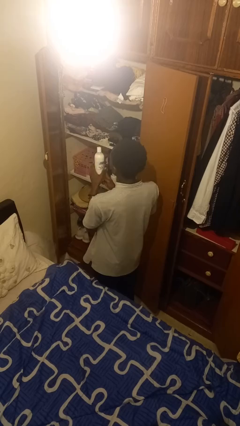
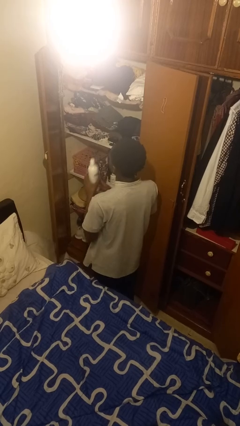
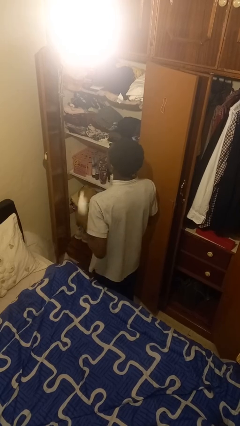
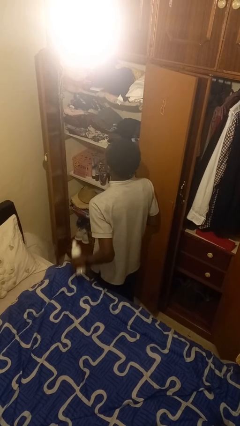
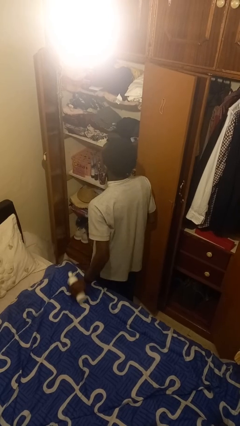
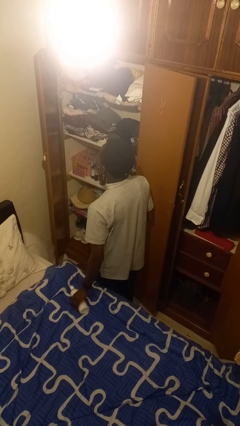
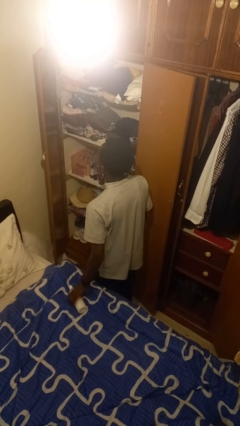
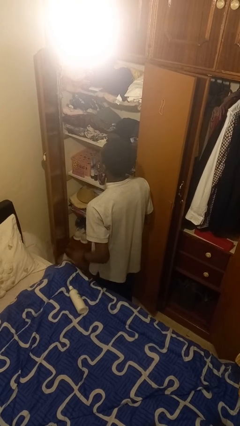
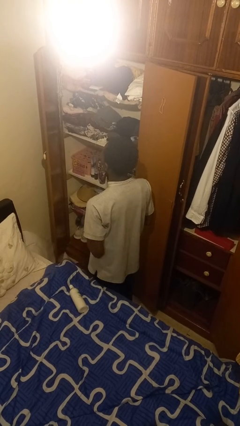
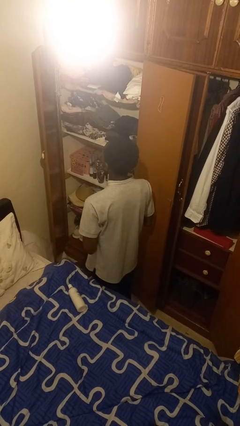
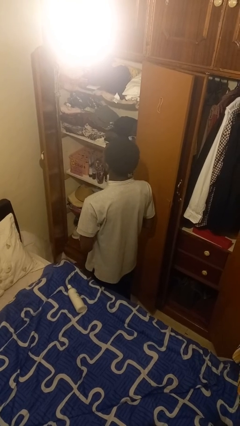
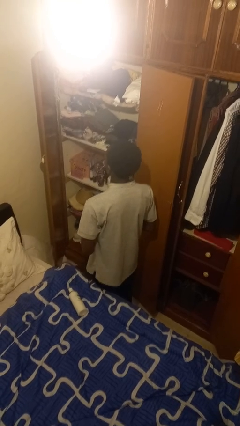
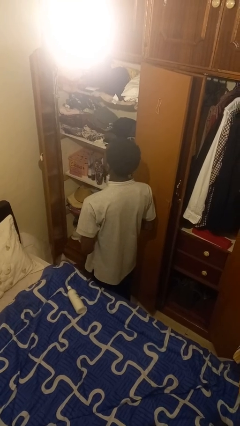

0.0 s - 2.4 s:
person puts down object on bed

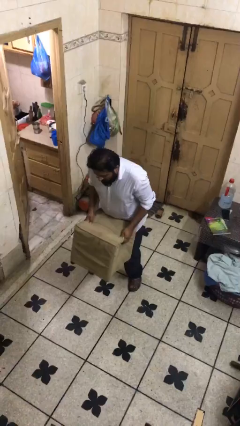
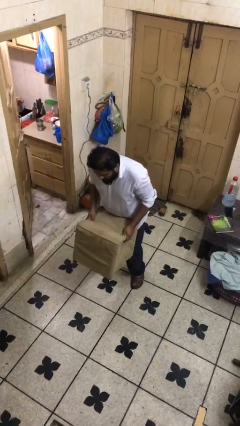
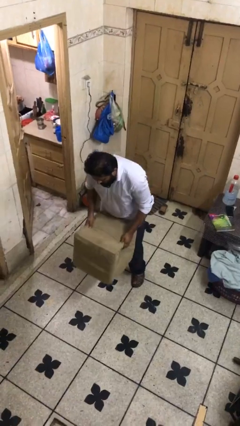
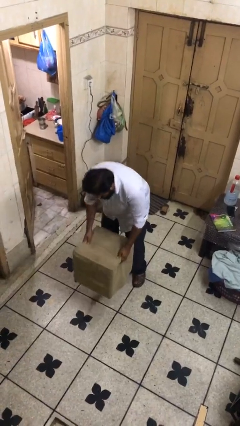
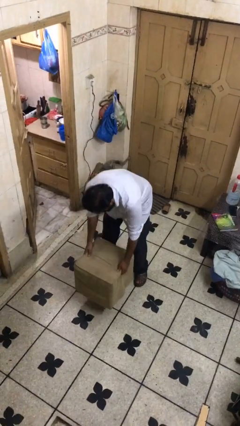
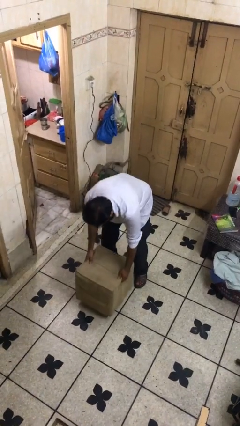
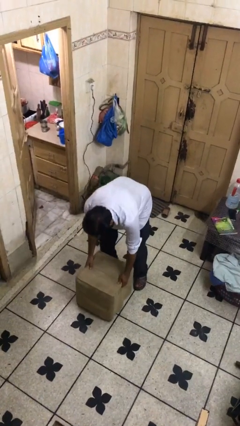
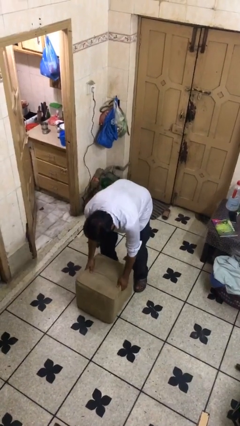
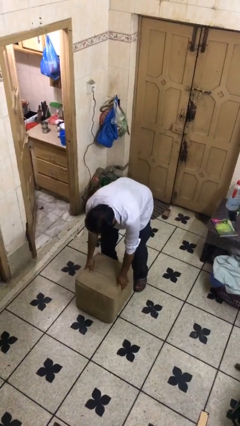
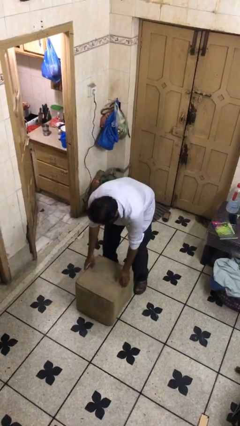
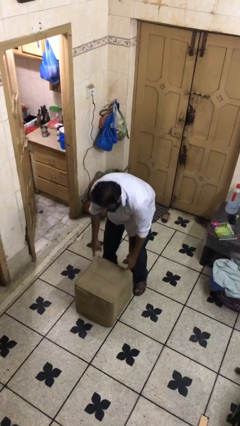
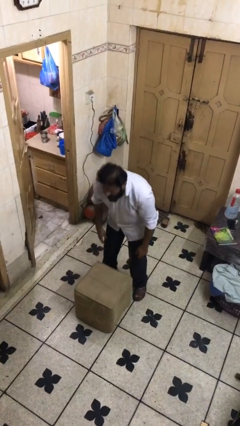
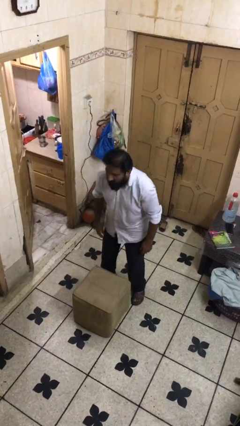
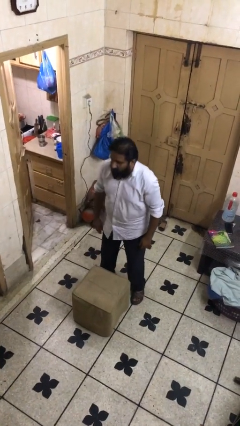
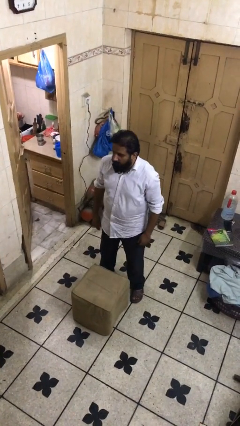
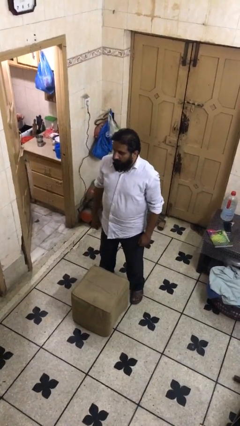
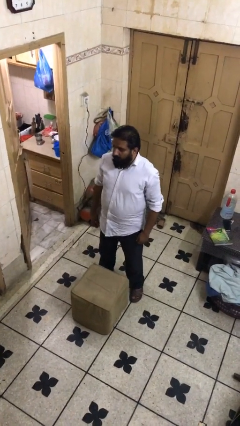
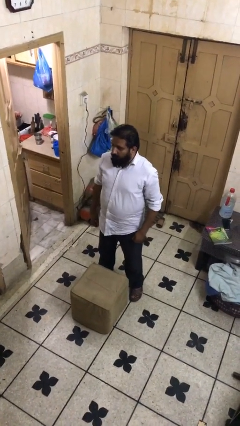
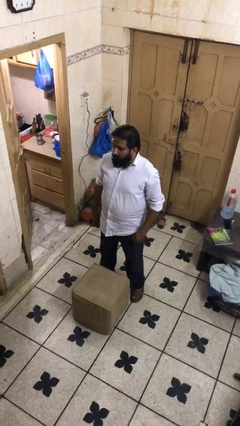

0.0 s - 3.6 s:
person puts down object on floor

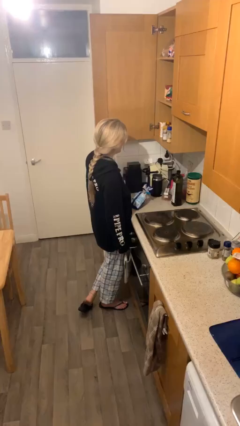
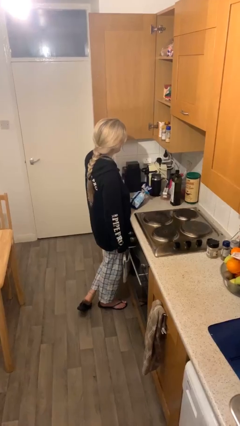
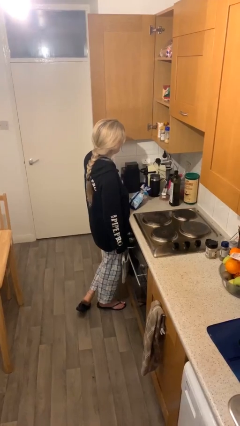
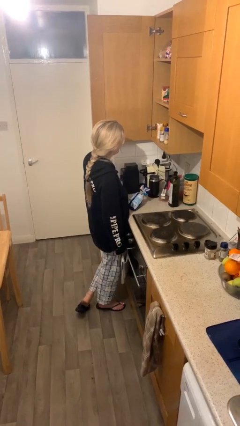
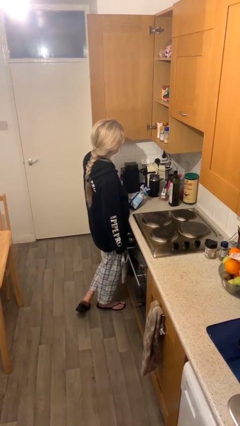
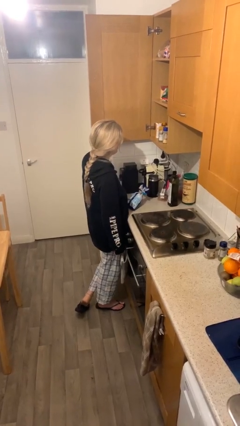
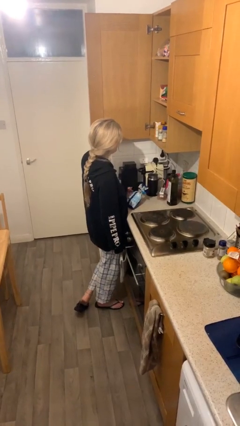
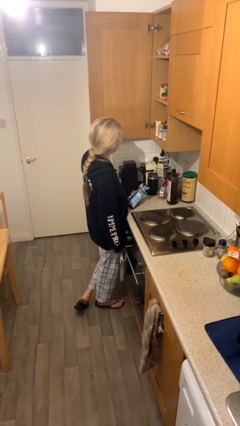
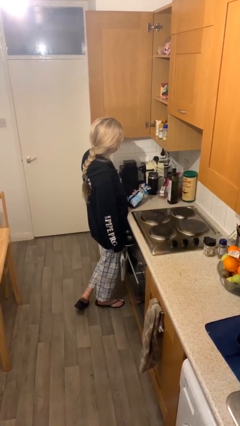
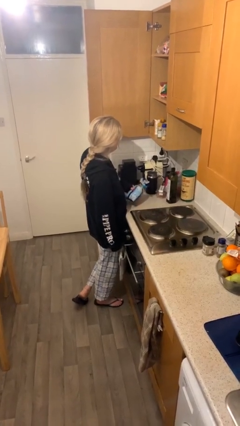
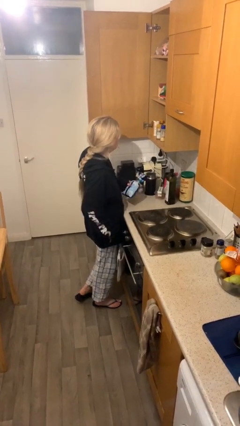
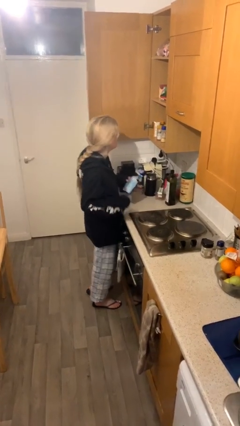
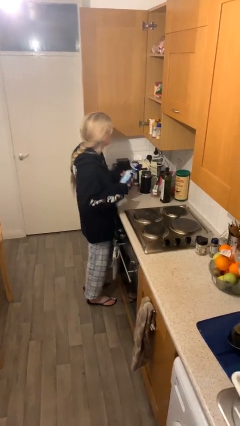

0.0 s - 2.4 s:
person picks up object from table

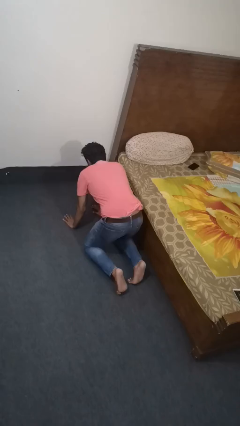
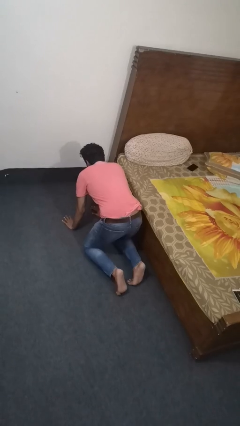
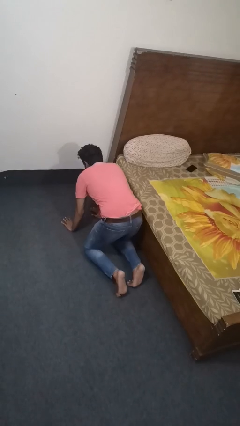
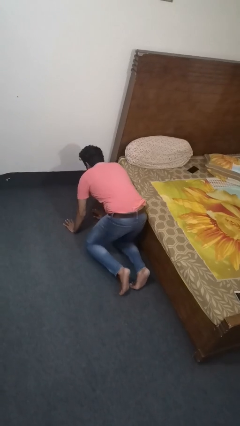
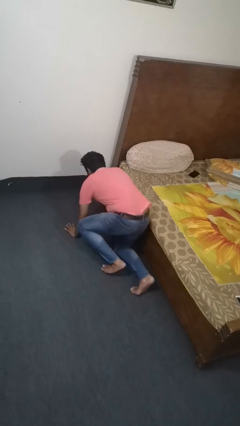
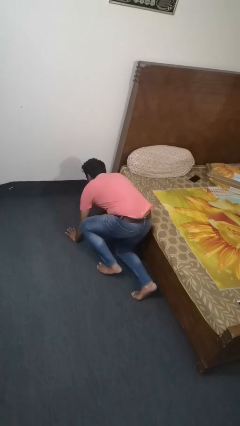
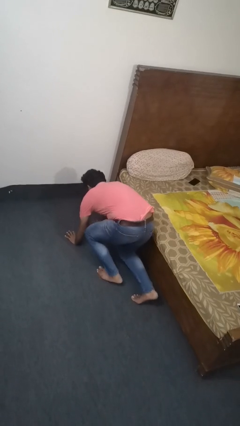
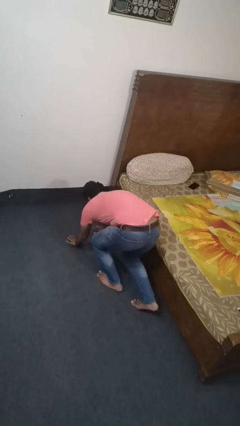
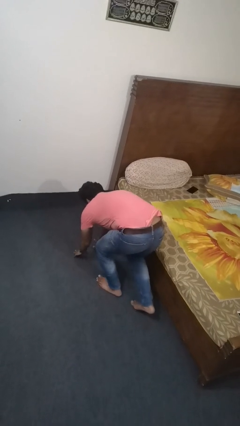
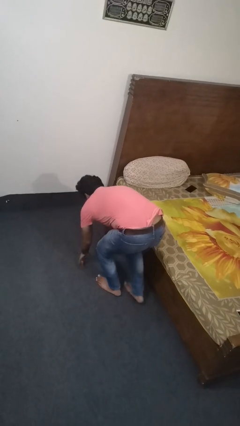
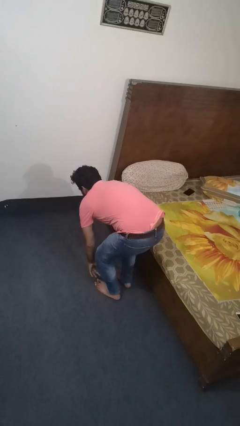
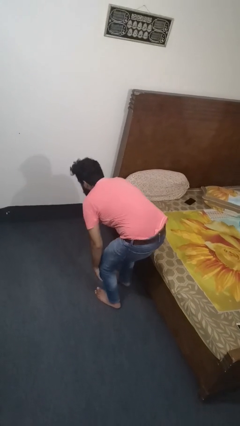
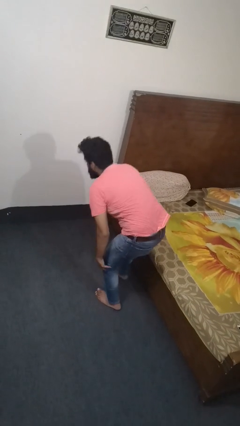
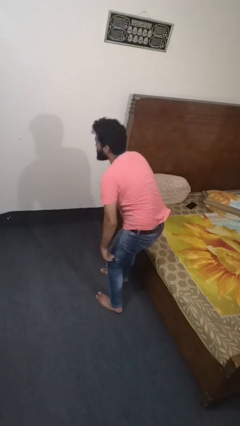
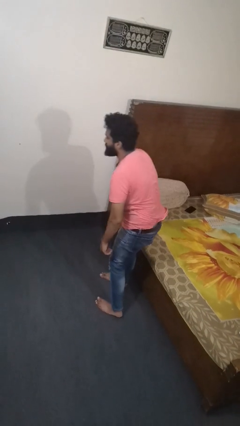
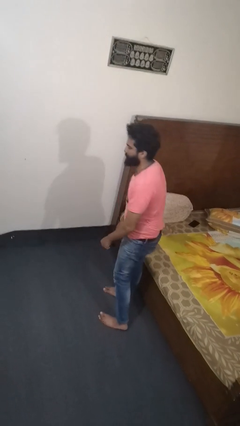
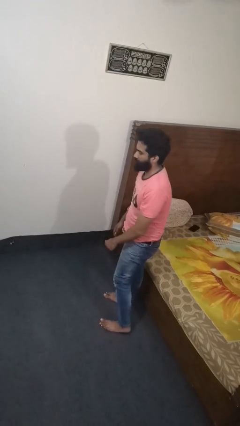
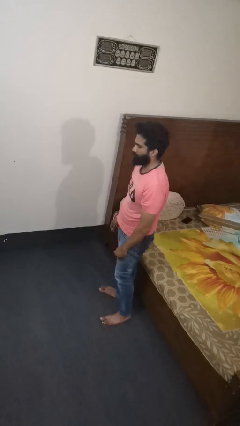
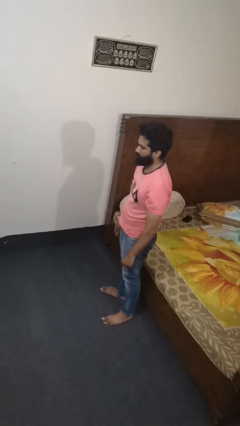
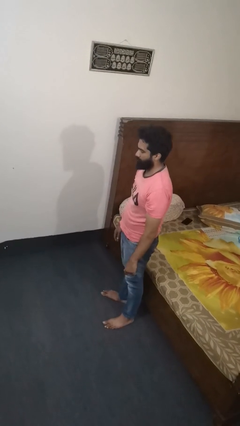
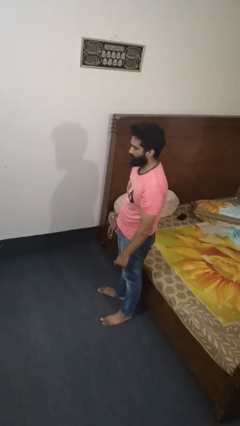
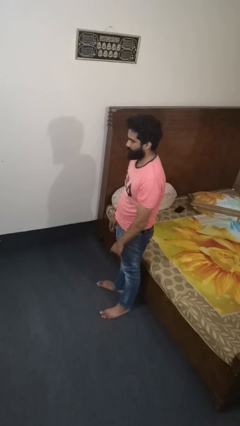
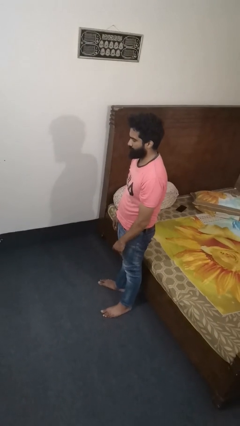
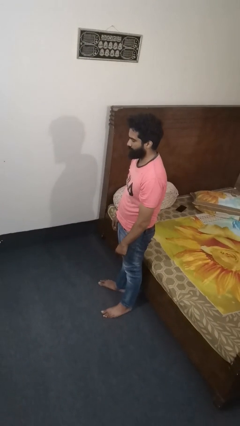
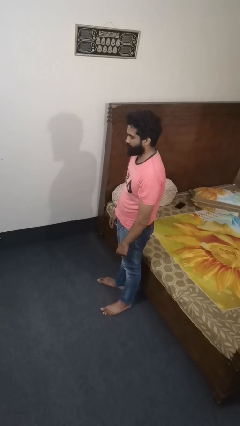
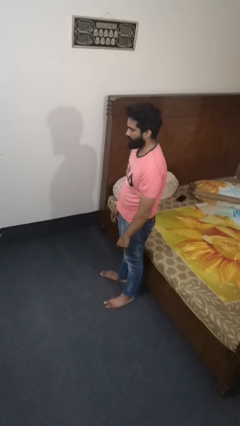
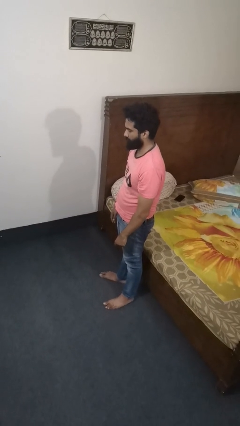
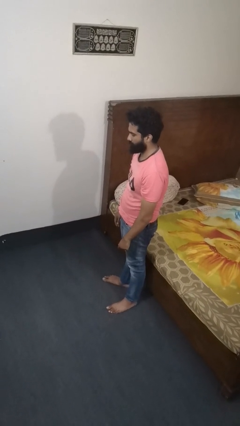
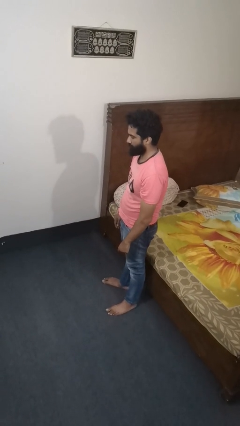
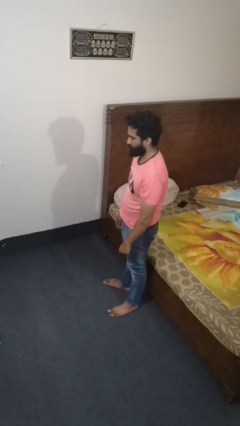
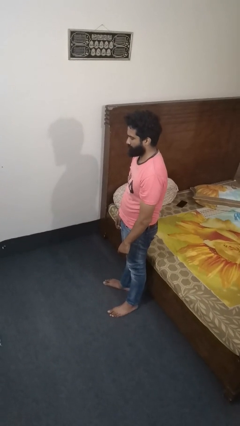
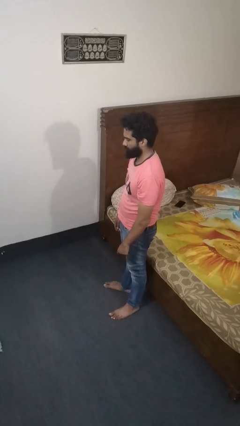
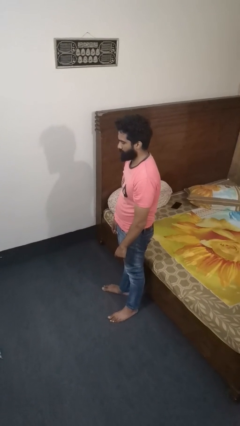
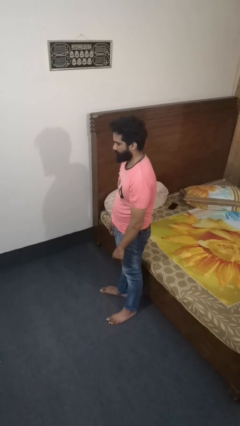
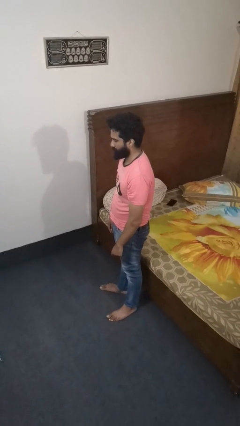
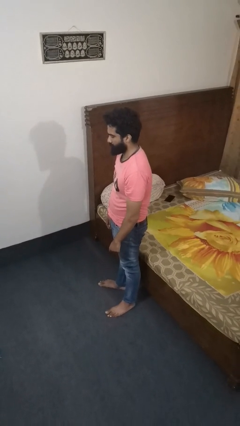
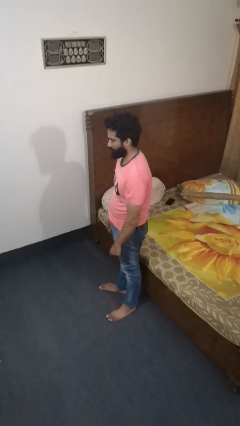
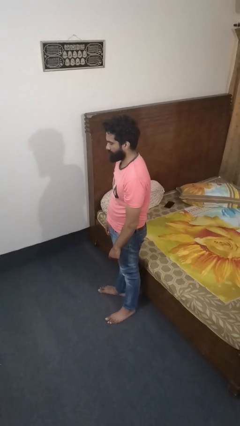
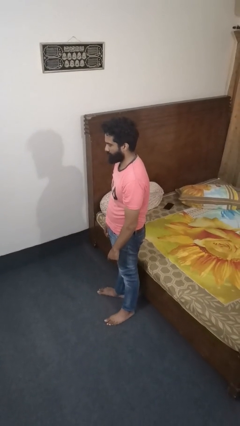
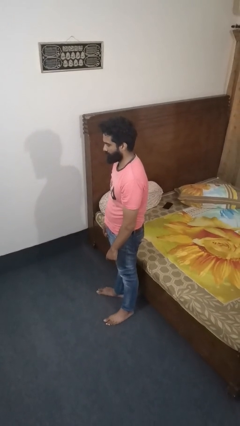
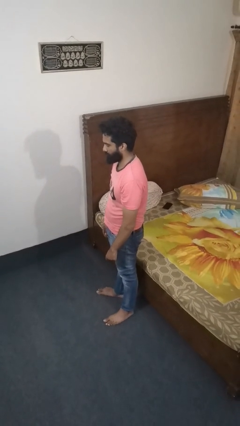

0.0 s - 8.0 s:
person stands up from floor

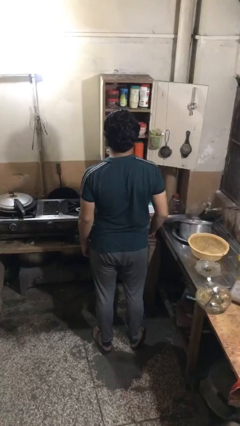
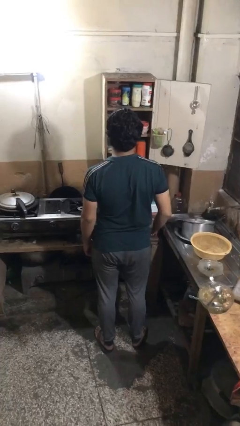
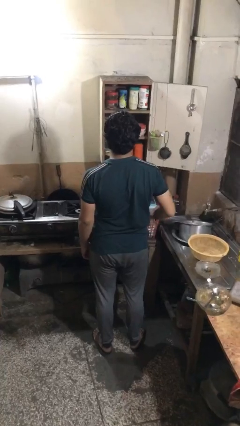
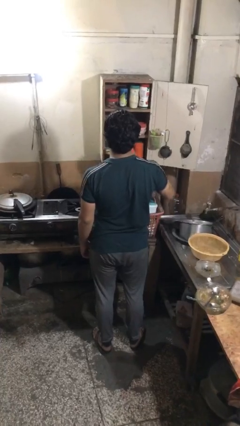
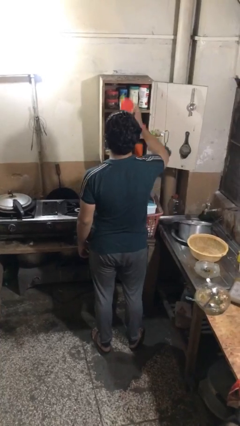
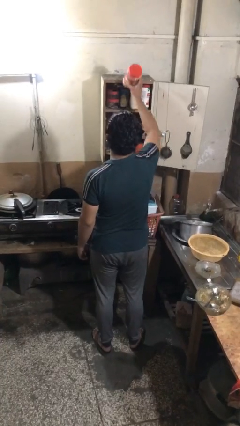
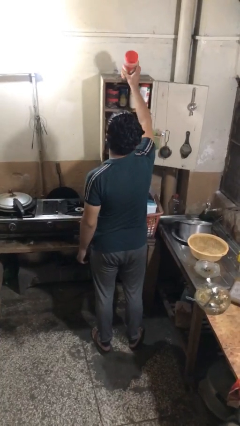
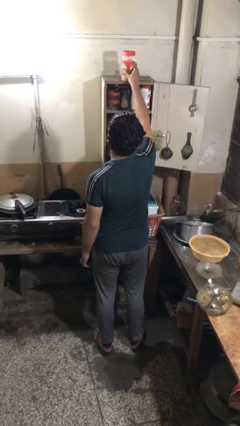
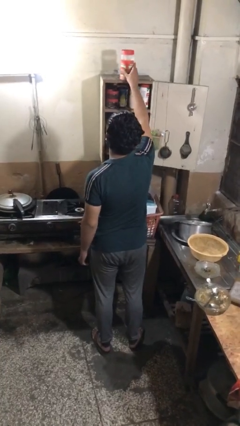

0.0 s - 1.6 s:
person takes object from cabinet
